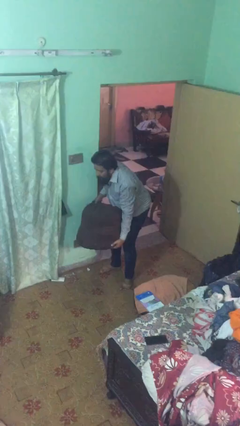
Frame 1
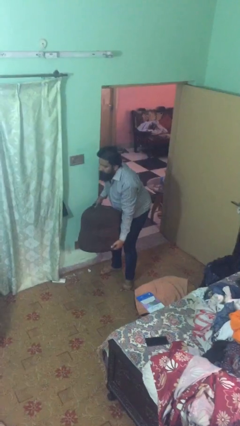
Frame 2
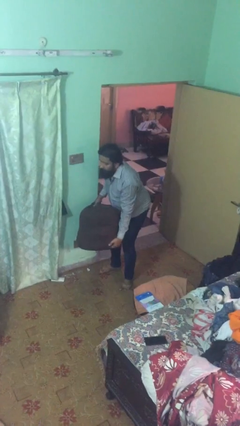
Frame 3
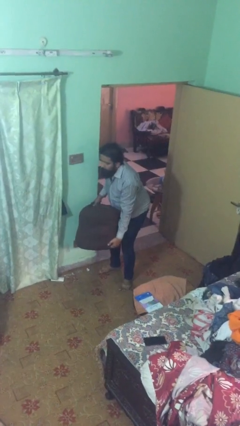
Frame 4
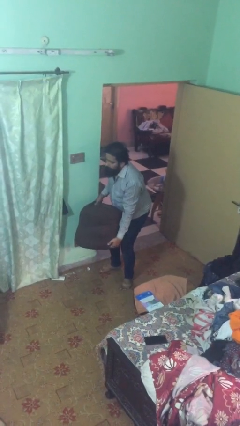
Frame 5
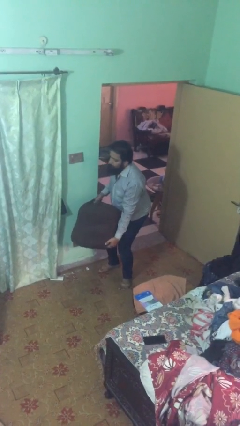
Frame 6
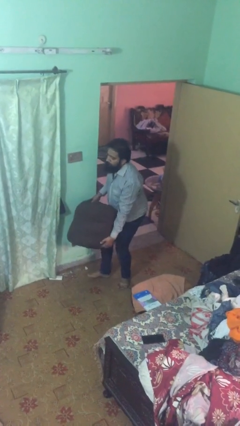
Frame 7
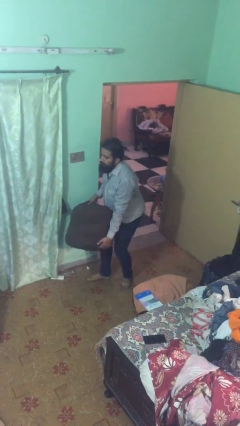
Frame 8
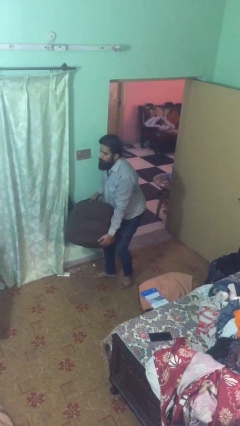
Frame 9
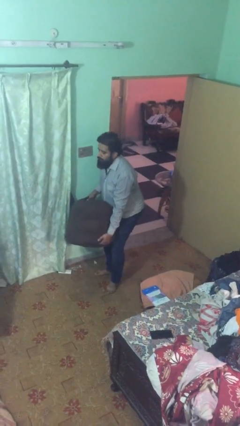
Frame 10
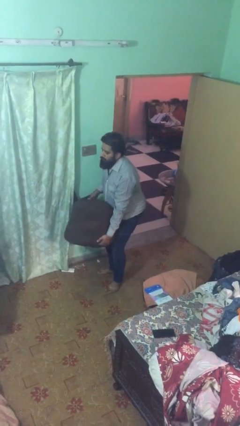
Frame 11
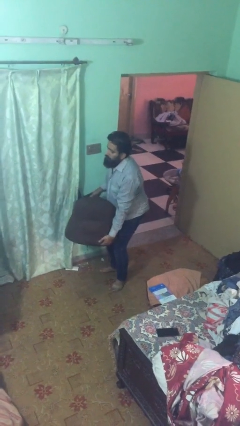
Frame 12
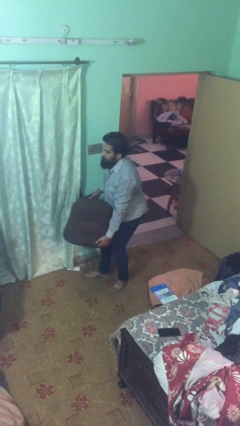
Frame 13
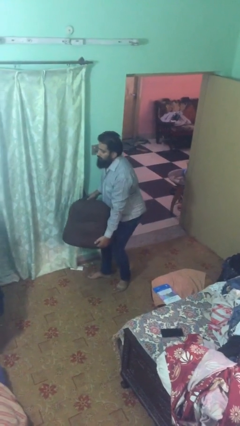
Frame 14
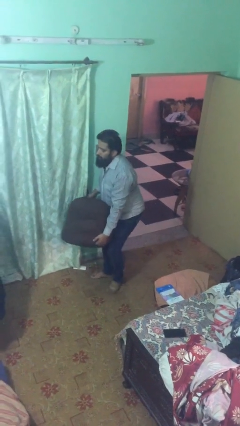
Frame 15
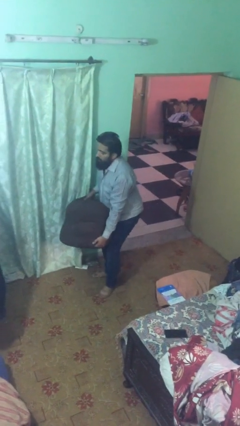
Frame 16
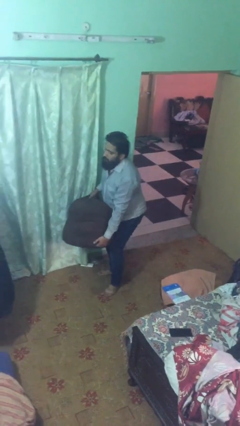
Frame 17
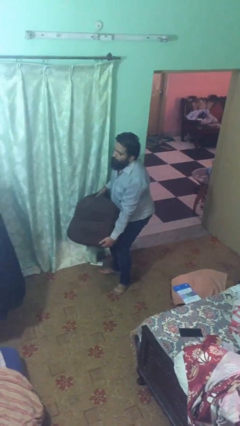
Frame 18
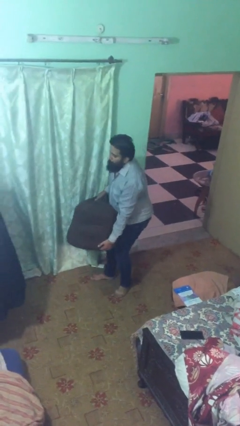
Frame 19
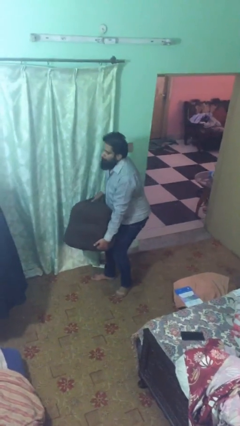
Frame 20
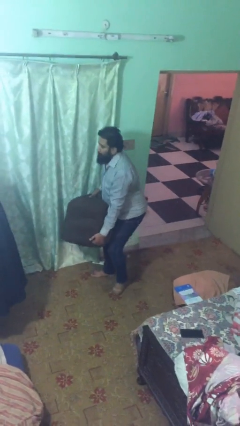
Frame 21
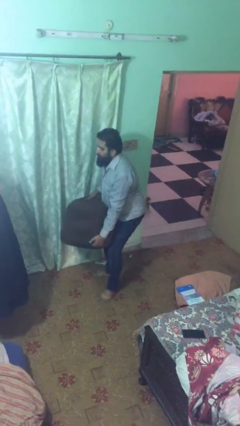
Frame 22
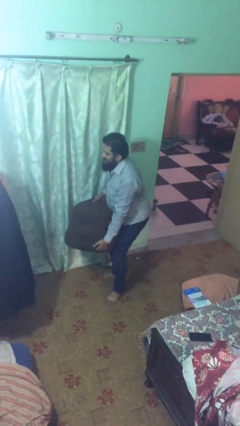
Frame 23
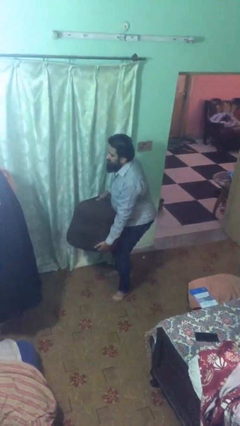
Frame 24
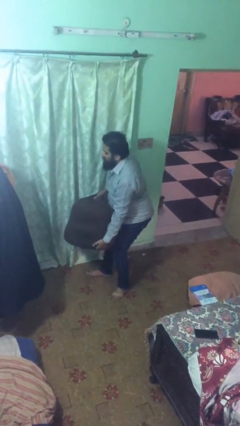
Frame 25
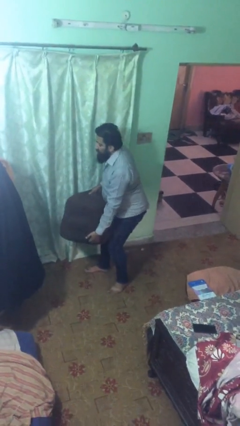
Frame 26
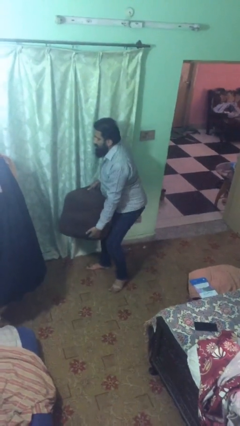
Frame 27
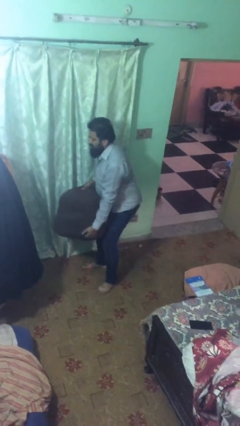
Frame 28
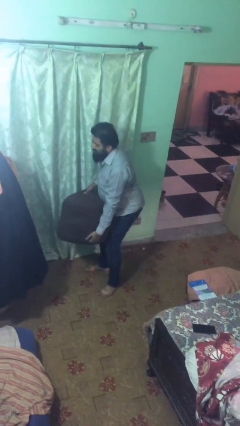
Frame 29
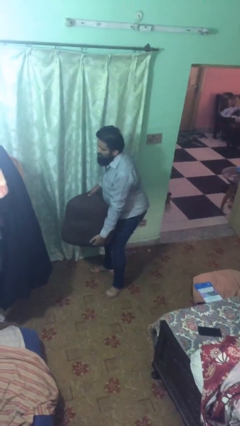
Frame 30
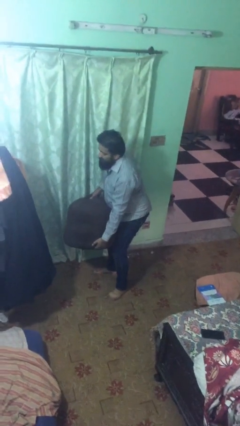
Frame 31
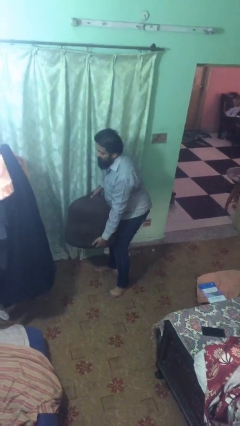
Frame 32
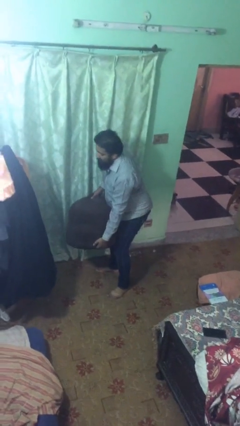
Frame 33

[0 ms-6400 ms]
person carries heavy object

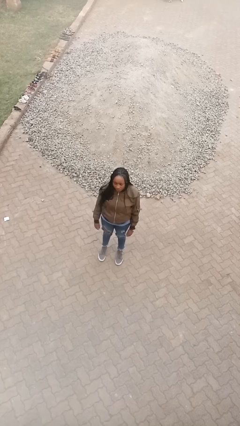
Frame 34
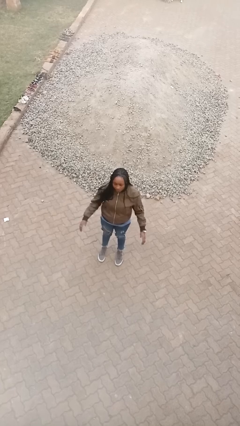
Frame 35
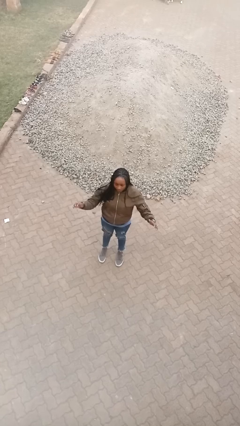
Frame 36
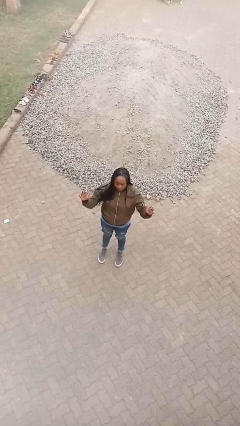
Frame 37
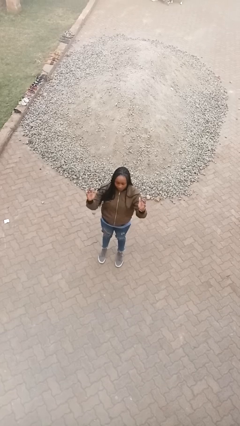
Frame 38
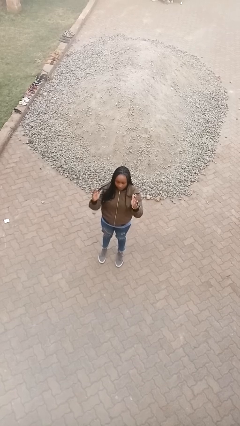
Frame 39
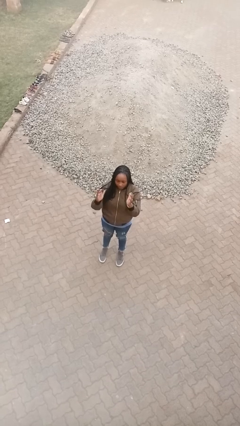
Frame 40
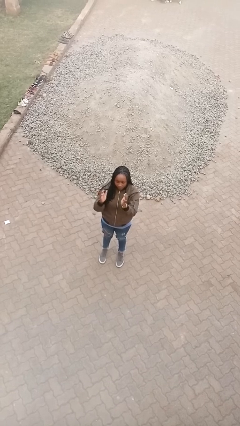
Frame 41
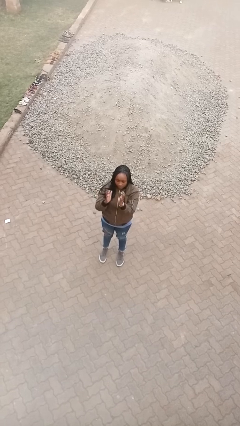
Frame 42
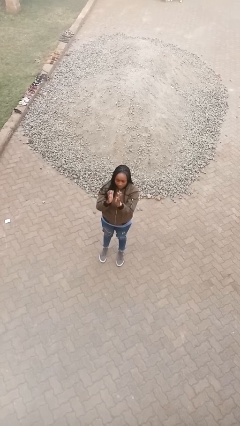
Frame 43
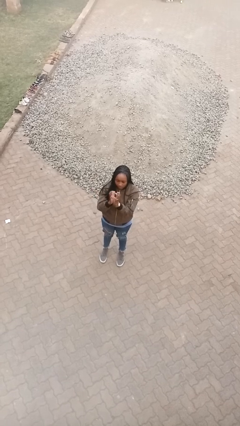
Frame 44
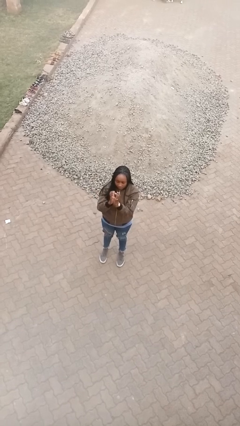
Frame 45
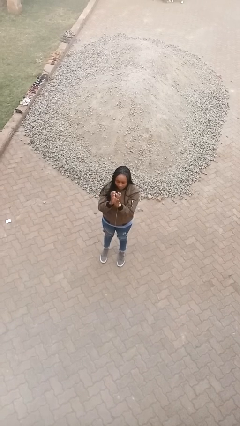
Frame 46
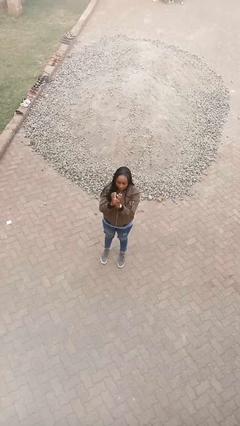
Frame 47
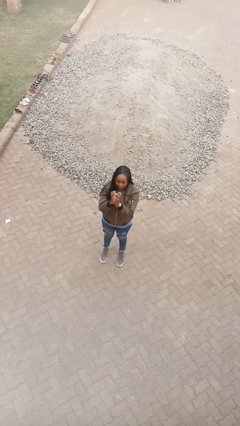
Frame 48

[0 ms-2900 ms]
person gestures zoom in

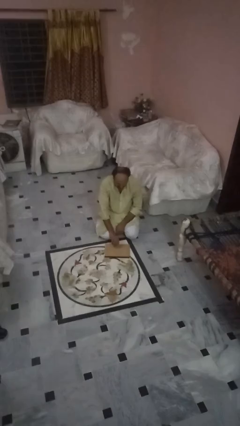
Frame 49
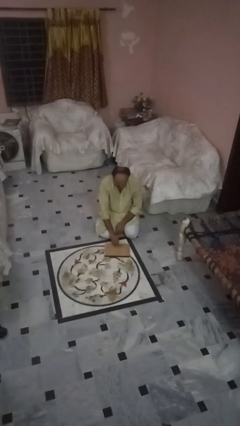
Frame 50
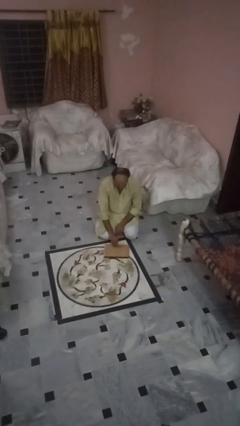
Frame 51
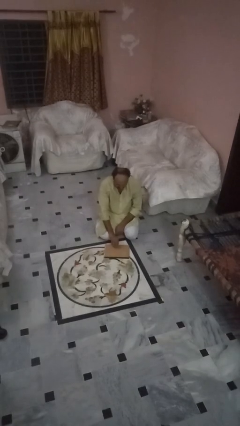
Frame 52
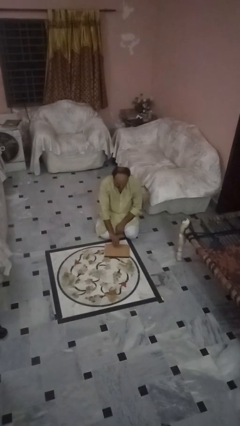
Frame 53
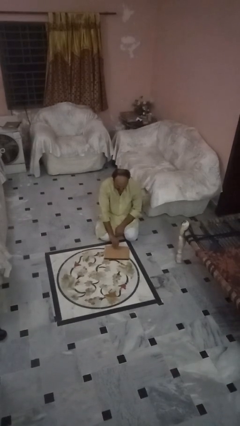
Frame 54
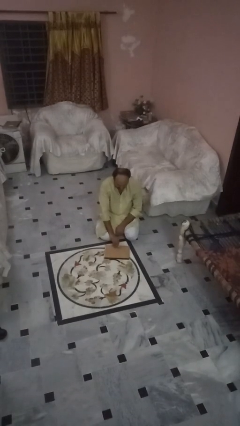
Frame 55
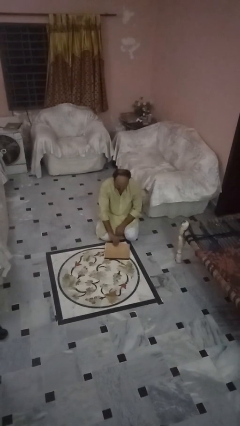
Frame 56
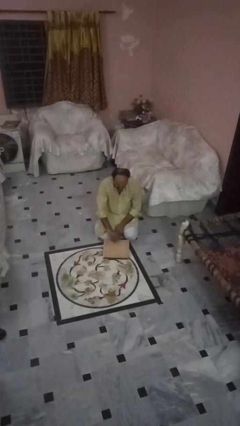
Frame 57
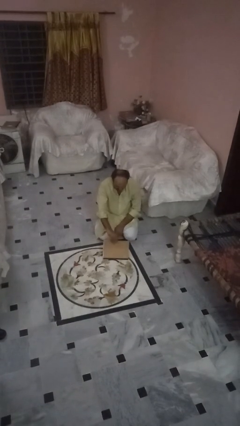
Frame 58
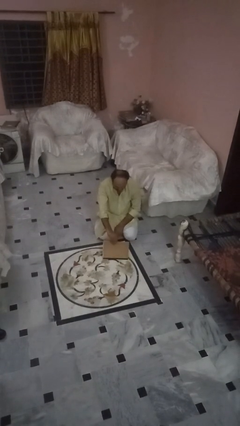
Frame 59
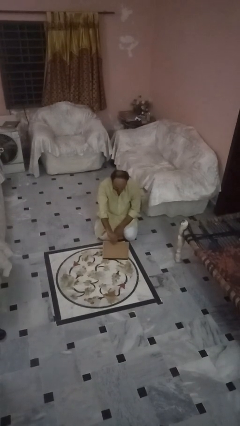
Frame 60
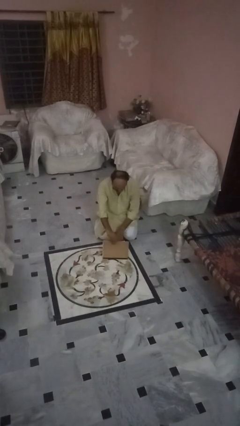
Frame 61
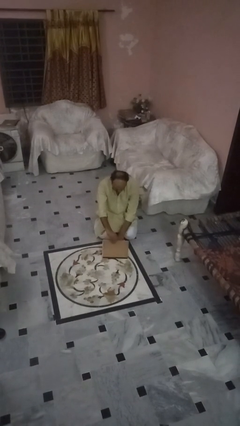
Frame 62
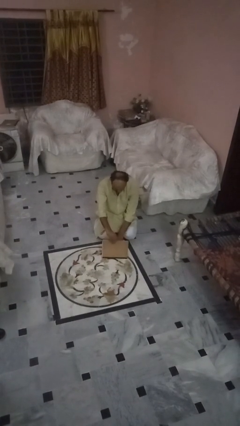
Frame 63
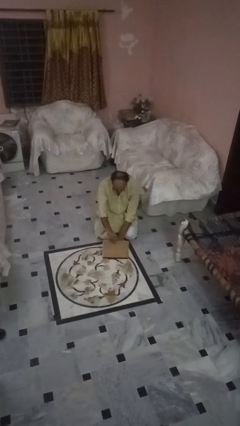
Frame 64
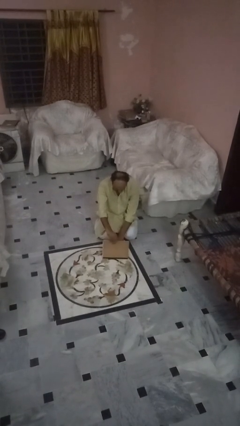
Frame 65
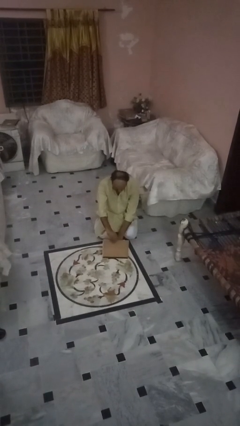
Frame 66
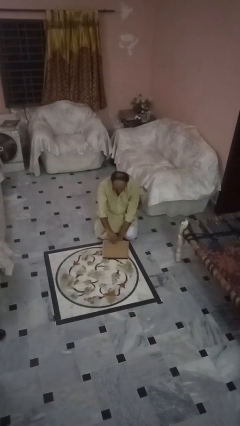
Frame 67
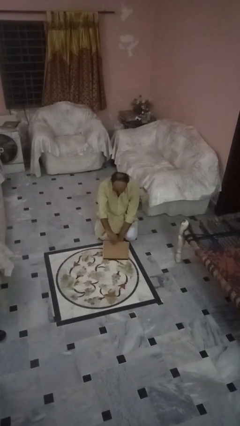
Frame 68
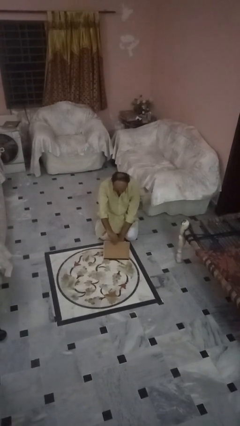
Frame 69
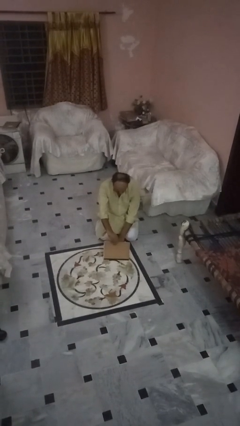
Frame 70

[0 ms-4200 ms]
person opens laptop

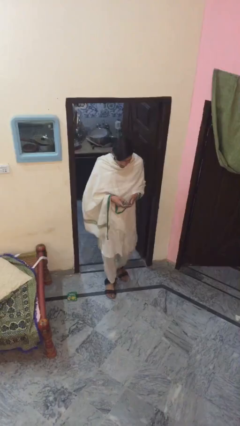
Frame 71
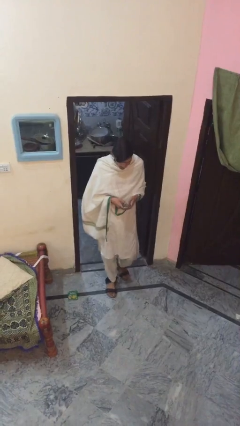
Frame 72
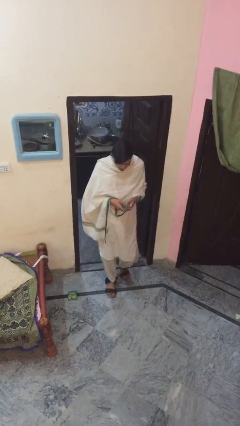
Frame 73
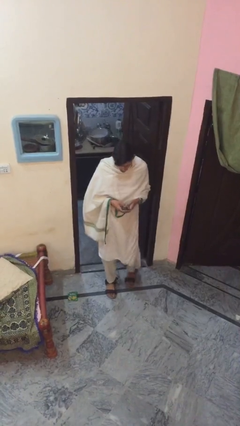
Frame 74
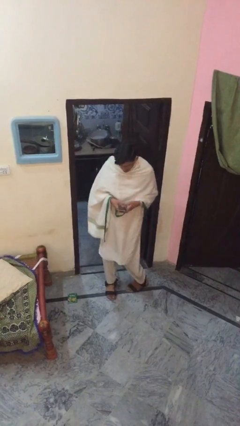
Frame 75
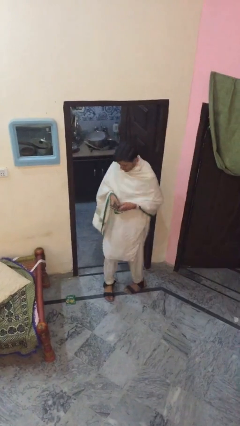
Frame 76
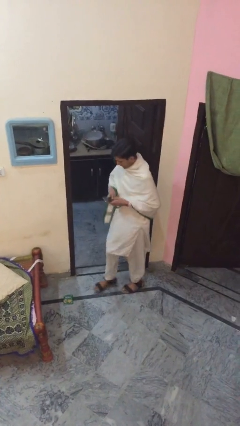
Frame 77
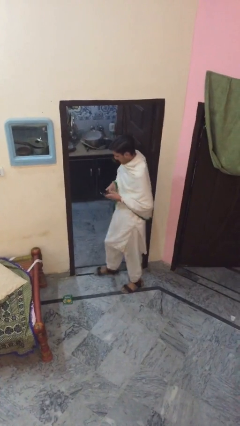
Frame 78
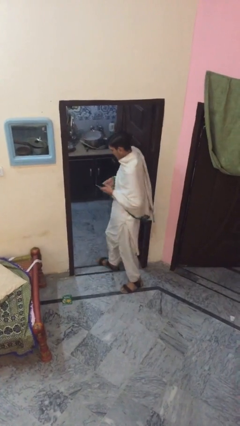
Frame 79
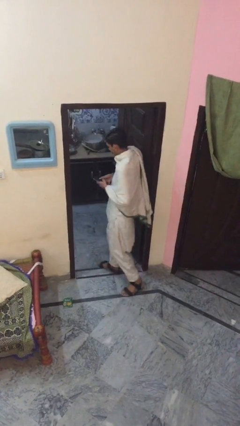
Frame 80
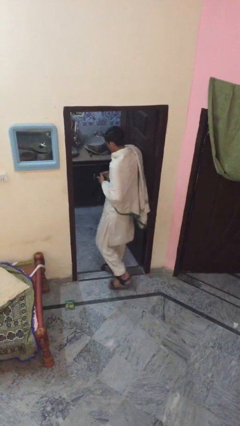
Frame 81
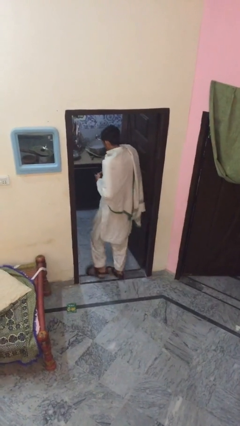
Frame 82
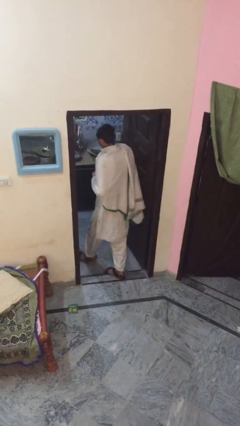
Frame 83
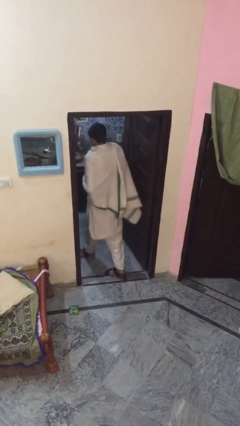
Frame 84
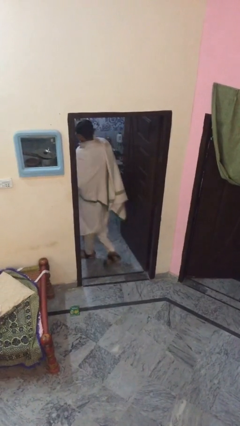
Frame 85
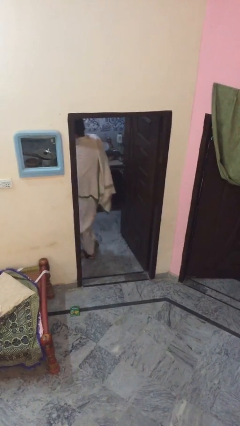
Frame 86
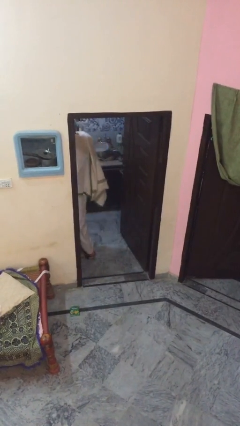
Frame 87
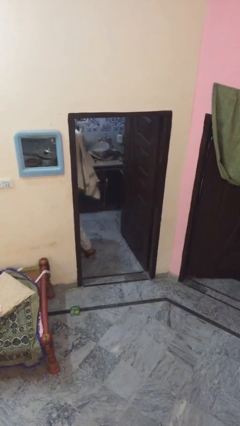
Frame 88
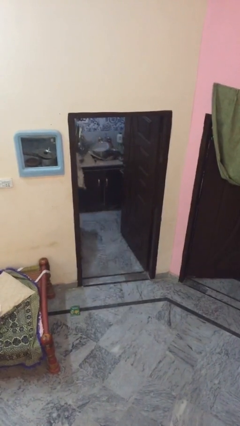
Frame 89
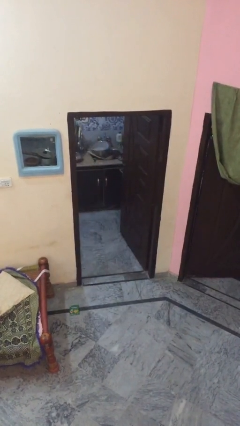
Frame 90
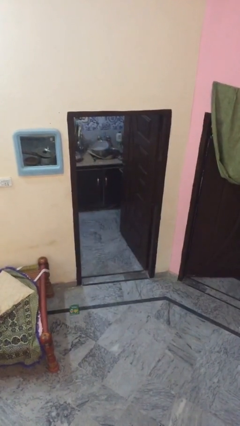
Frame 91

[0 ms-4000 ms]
person exits scene through structure

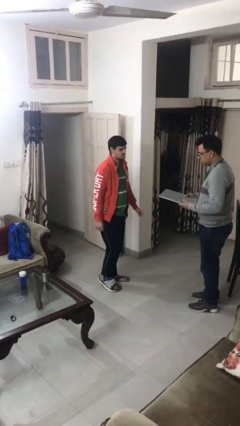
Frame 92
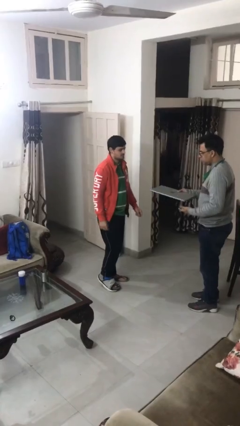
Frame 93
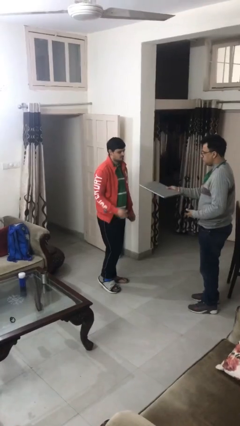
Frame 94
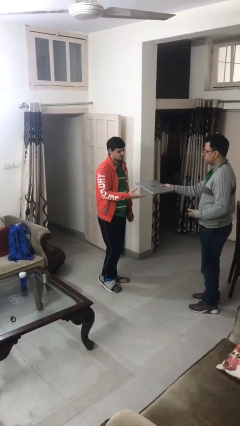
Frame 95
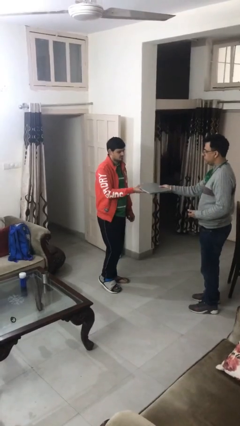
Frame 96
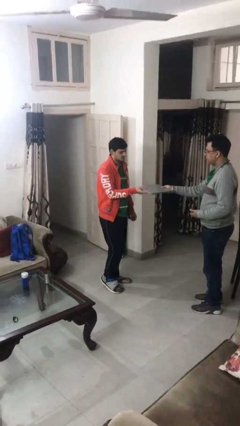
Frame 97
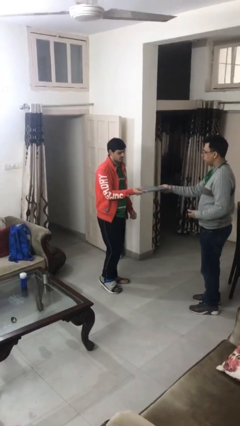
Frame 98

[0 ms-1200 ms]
person transfers object to person
